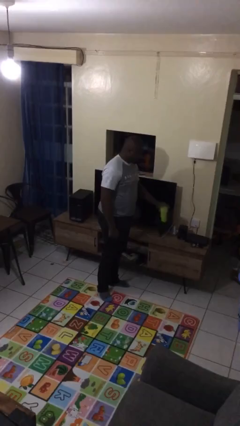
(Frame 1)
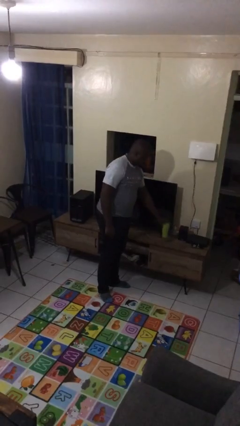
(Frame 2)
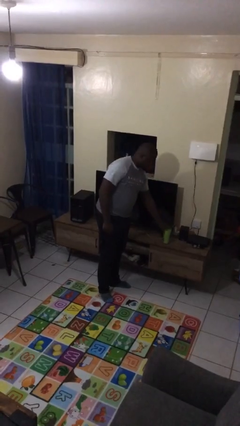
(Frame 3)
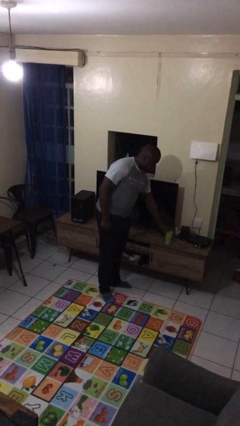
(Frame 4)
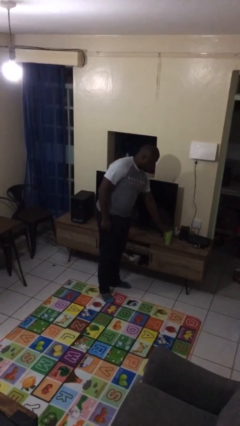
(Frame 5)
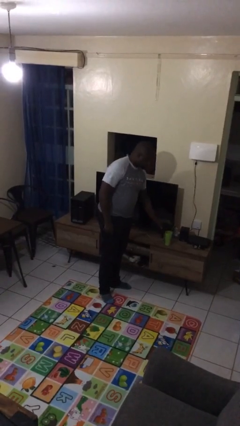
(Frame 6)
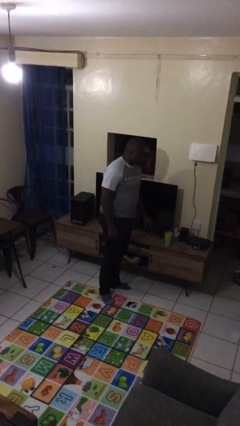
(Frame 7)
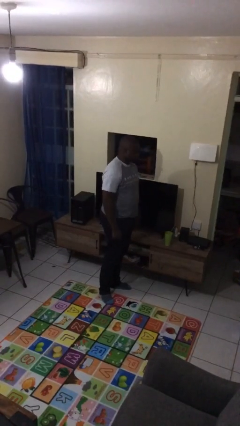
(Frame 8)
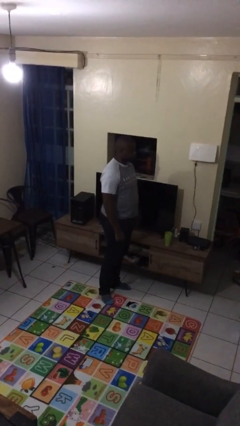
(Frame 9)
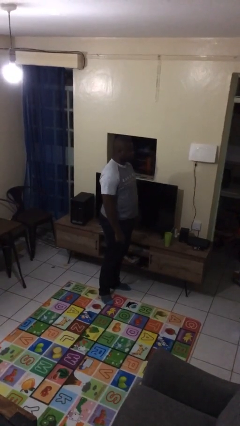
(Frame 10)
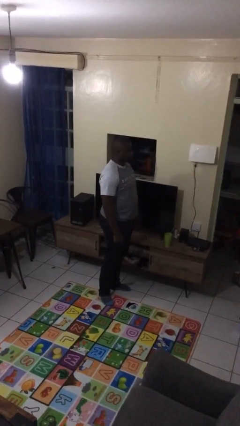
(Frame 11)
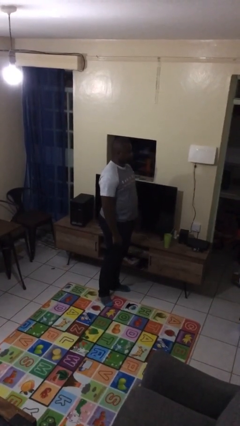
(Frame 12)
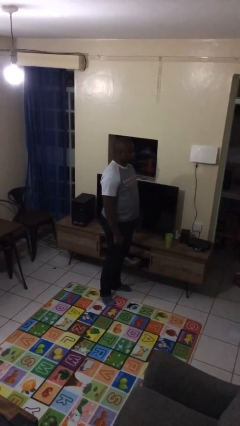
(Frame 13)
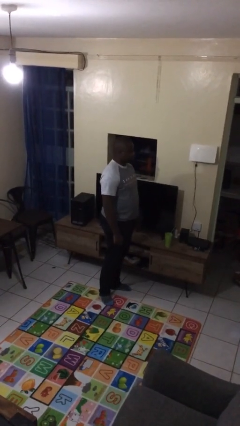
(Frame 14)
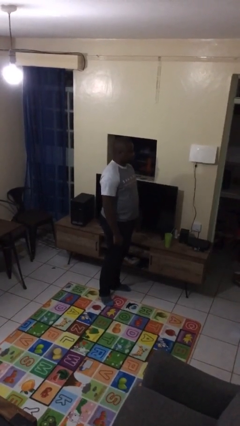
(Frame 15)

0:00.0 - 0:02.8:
person puts down object on countertop

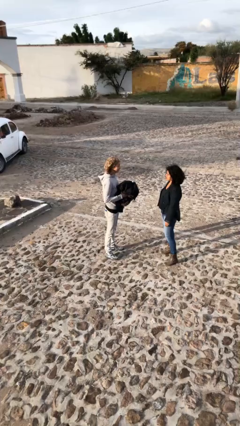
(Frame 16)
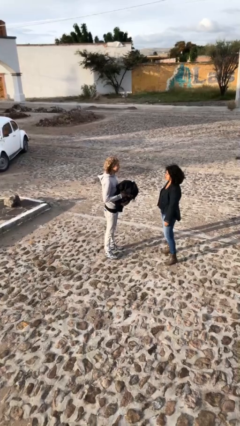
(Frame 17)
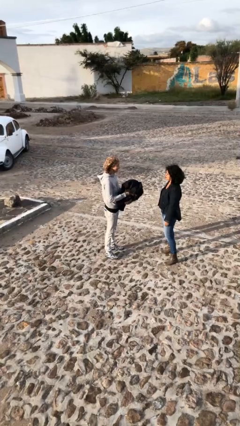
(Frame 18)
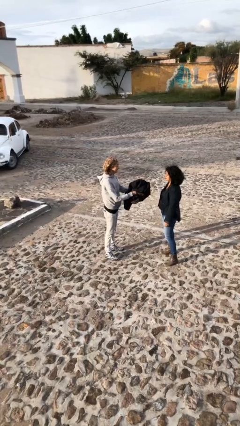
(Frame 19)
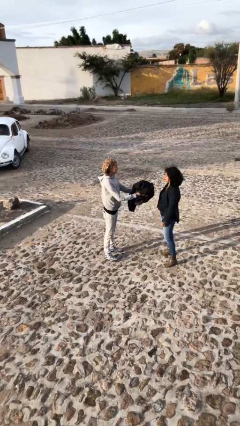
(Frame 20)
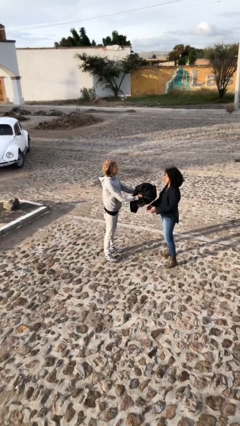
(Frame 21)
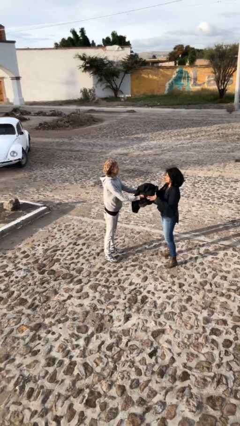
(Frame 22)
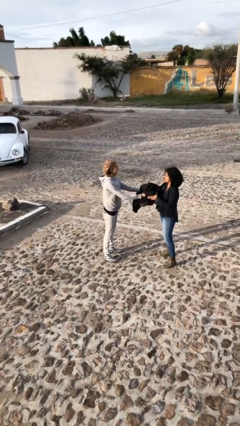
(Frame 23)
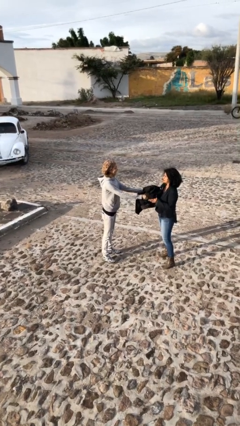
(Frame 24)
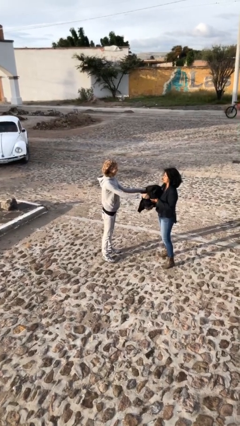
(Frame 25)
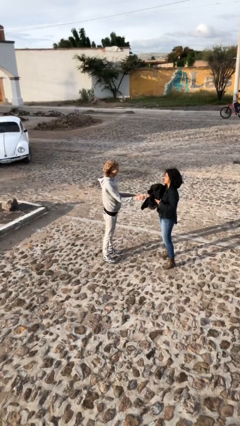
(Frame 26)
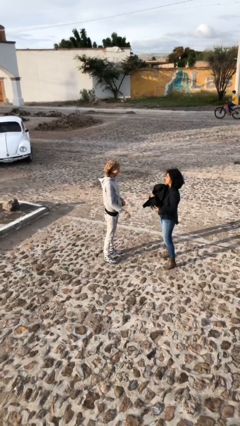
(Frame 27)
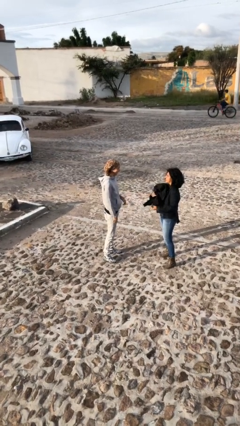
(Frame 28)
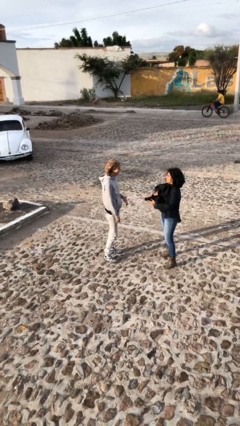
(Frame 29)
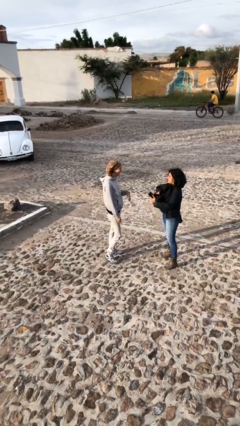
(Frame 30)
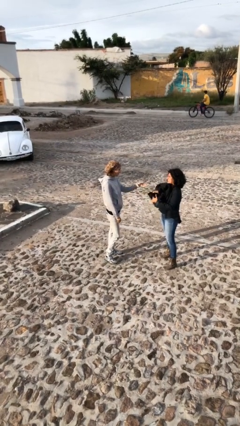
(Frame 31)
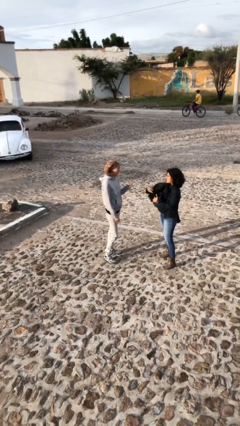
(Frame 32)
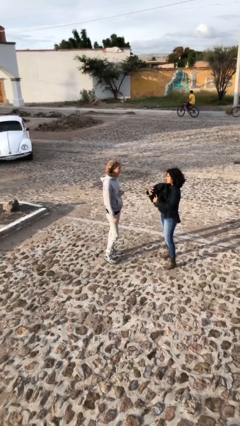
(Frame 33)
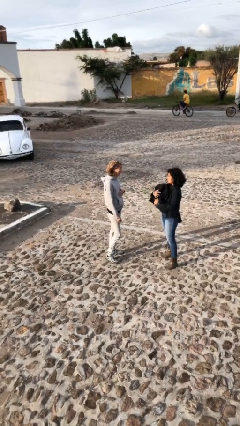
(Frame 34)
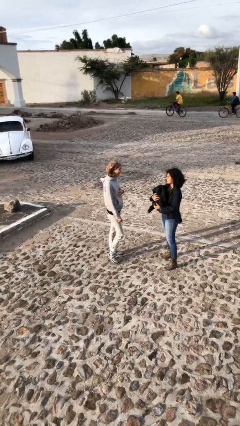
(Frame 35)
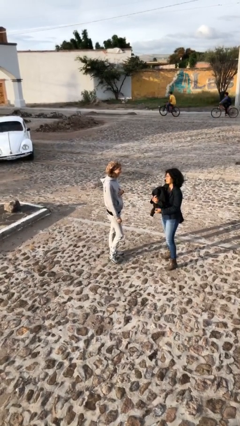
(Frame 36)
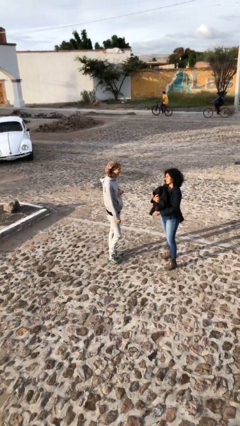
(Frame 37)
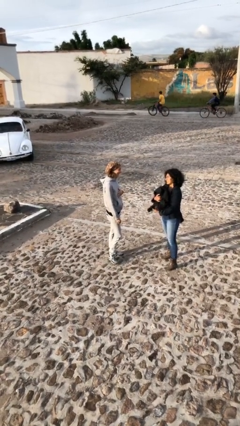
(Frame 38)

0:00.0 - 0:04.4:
person transfers object to person

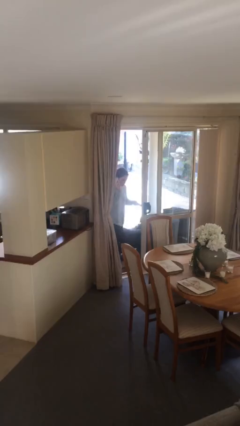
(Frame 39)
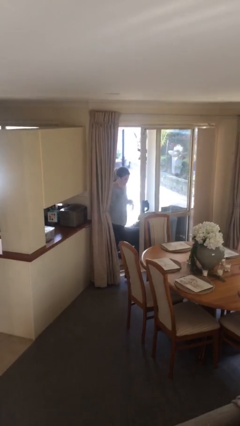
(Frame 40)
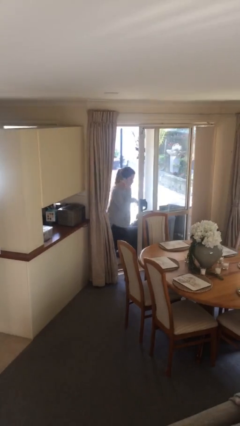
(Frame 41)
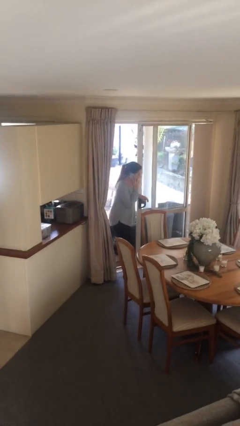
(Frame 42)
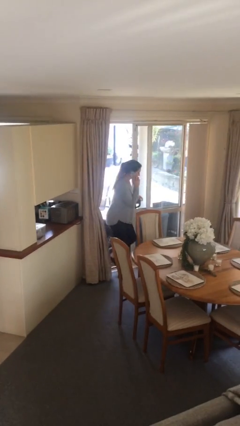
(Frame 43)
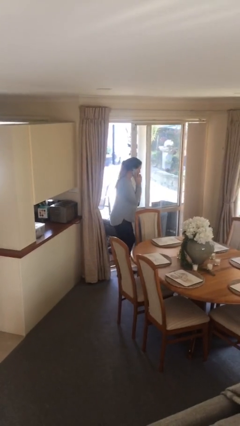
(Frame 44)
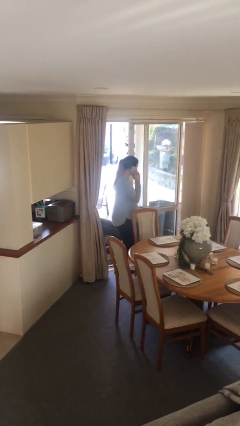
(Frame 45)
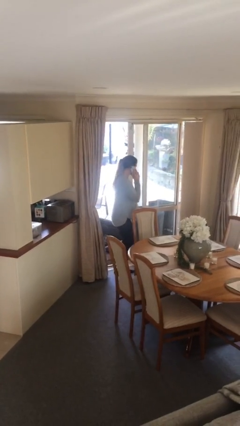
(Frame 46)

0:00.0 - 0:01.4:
person enters scene through structure

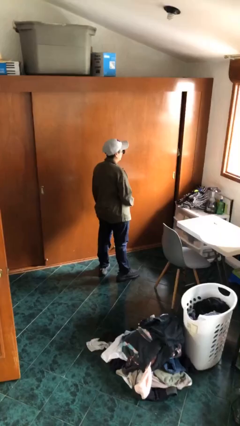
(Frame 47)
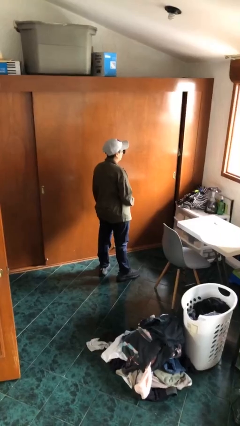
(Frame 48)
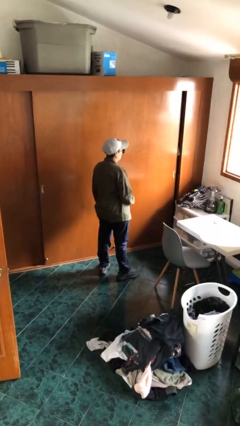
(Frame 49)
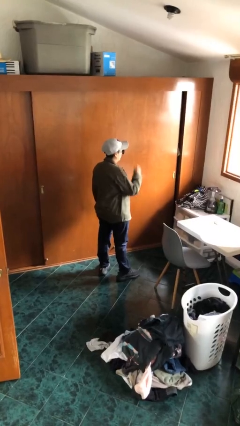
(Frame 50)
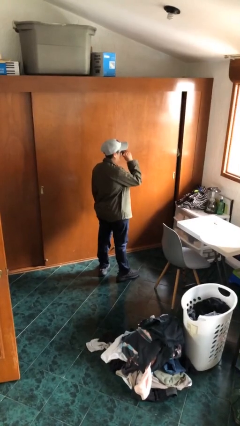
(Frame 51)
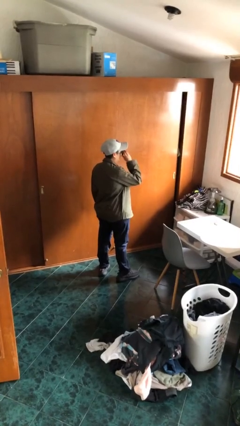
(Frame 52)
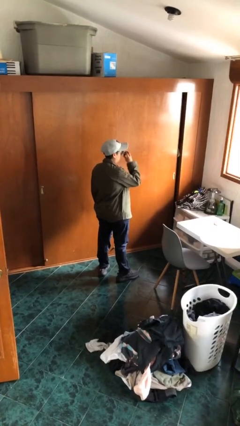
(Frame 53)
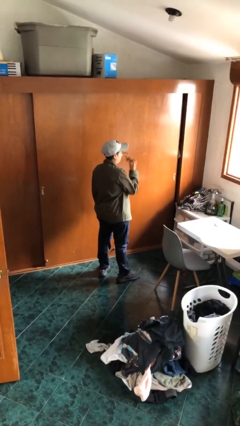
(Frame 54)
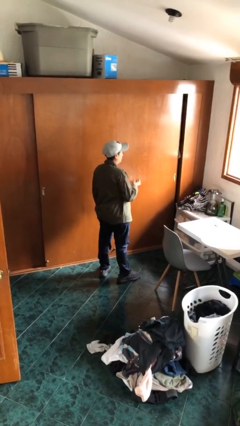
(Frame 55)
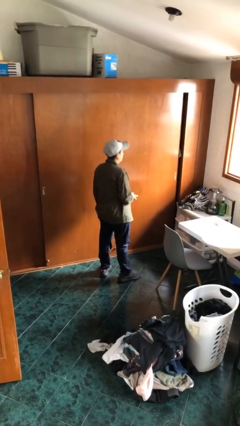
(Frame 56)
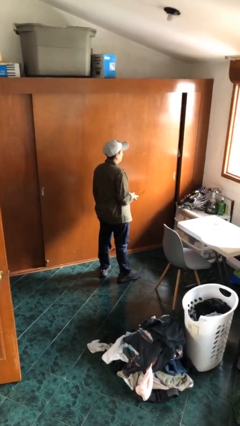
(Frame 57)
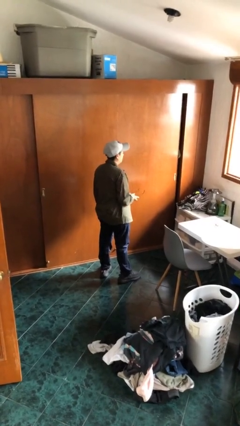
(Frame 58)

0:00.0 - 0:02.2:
person takes off sunglasses

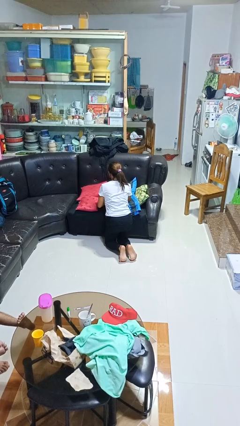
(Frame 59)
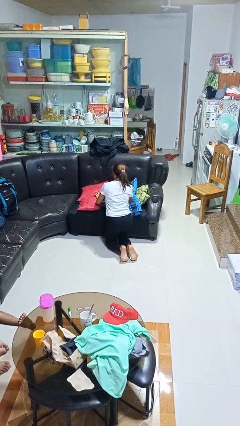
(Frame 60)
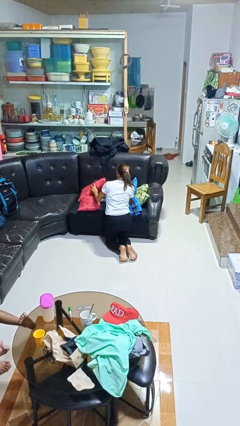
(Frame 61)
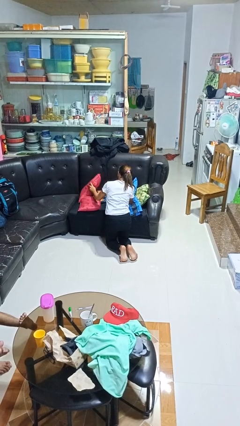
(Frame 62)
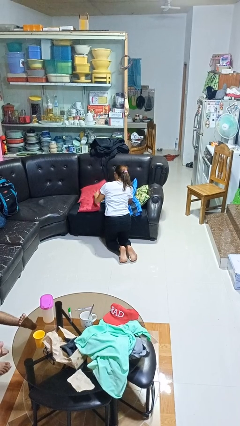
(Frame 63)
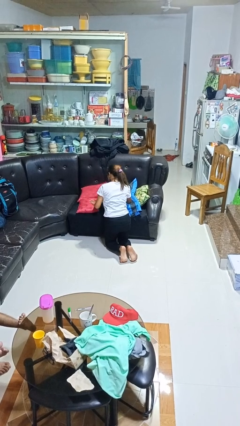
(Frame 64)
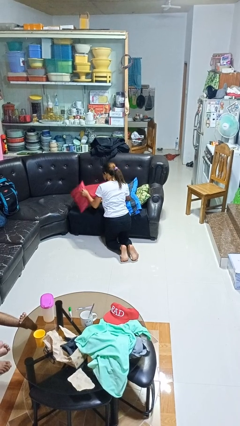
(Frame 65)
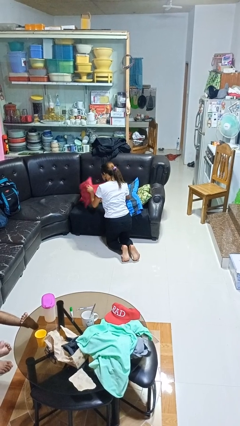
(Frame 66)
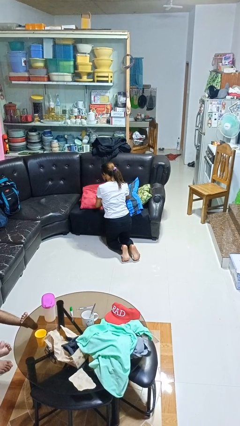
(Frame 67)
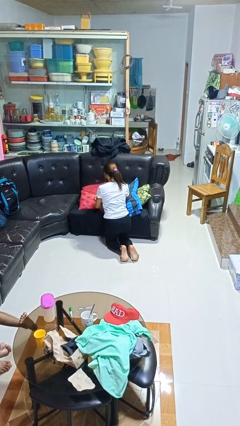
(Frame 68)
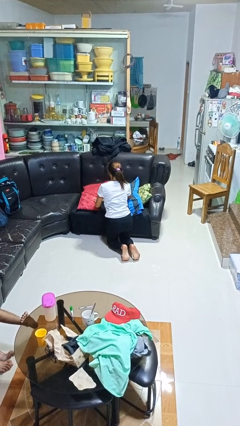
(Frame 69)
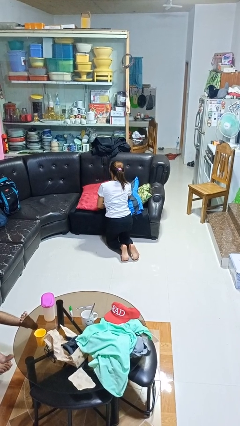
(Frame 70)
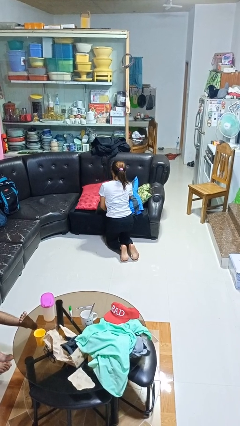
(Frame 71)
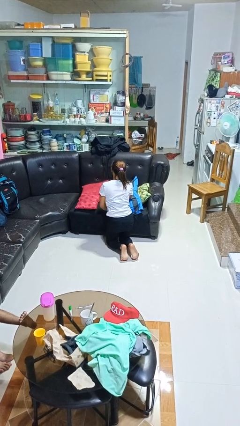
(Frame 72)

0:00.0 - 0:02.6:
person searches in couch

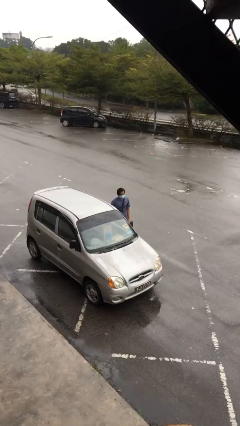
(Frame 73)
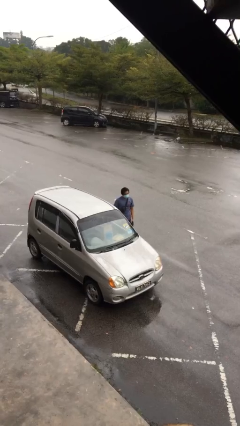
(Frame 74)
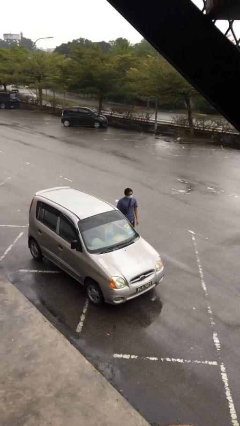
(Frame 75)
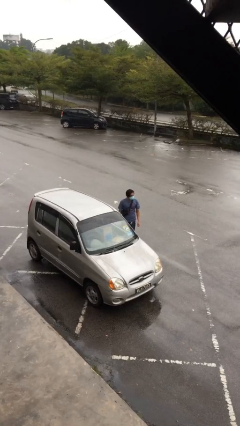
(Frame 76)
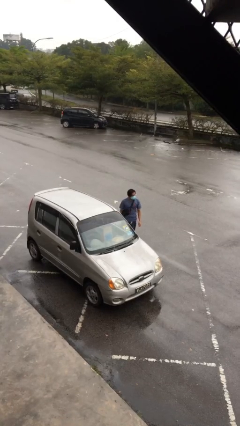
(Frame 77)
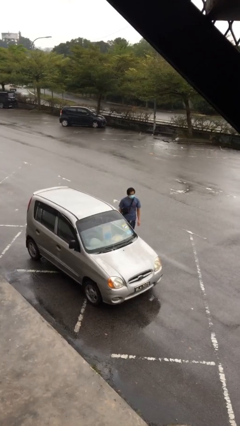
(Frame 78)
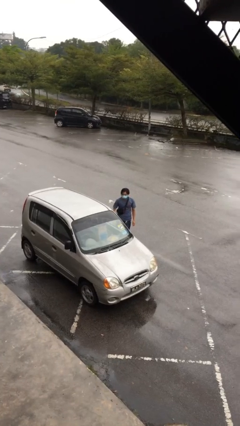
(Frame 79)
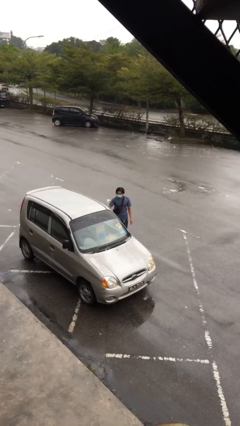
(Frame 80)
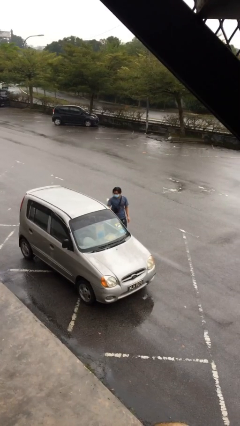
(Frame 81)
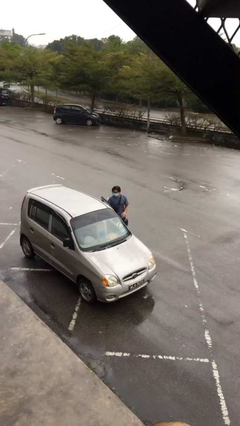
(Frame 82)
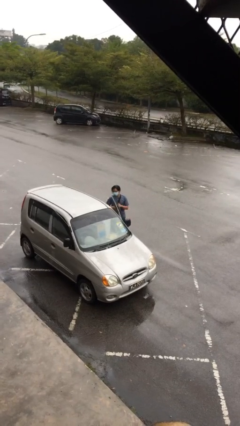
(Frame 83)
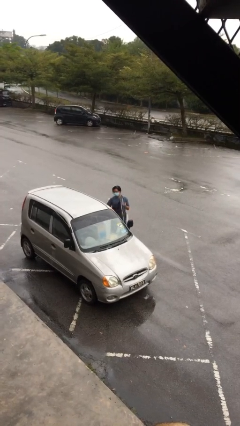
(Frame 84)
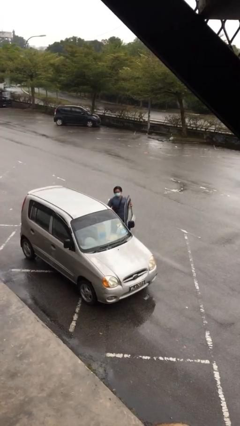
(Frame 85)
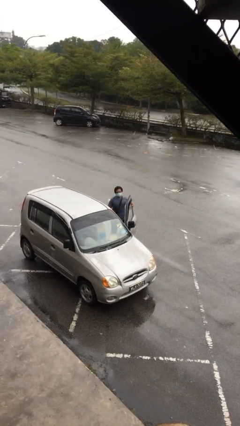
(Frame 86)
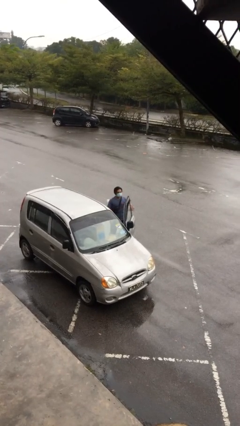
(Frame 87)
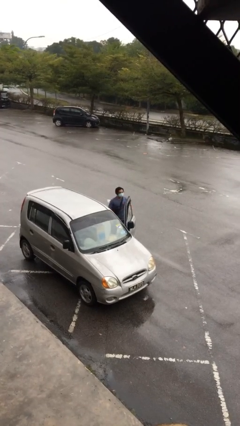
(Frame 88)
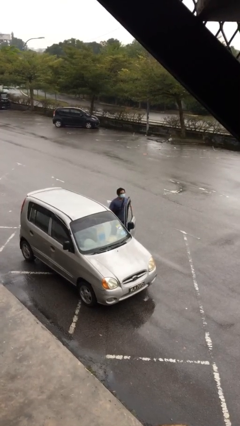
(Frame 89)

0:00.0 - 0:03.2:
person opens car door

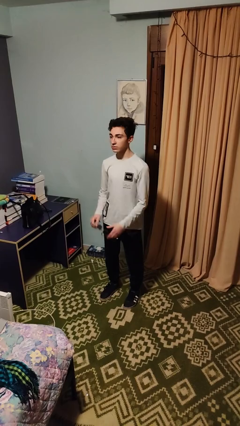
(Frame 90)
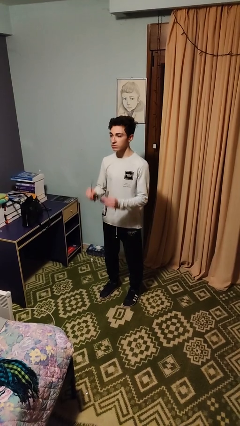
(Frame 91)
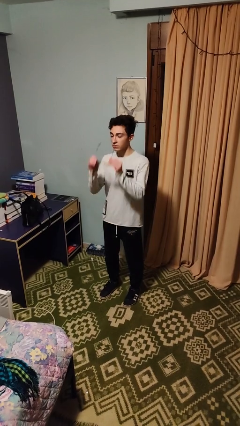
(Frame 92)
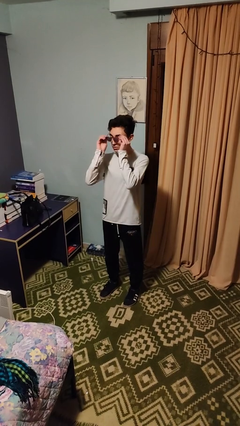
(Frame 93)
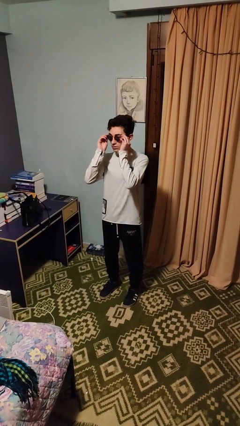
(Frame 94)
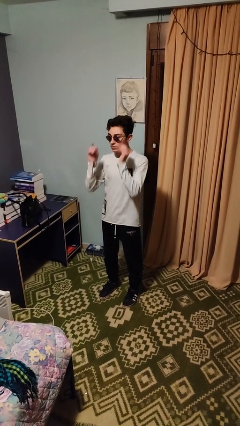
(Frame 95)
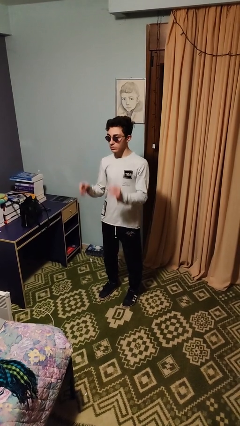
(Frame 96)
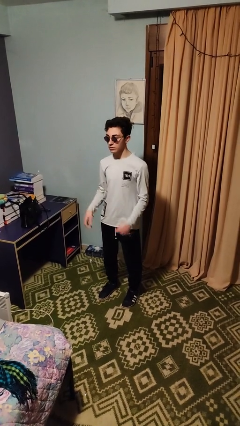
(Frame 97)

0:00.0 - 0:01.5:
person puts on sunglasses
